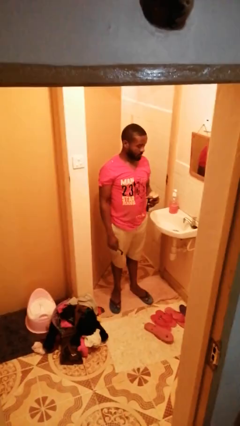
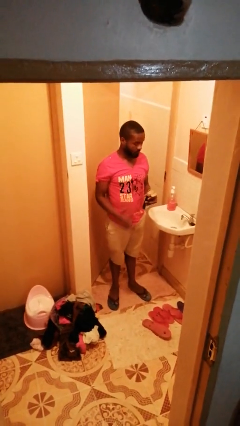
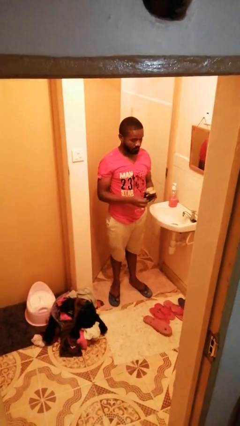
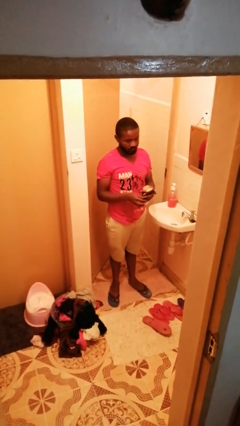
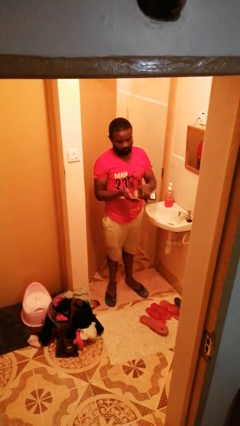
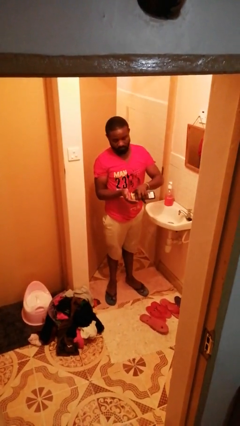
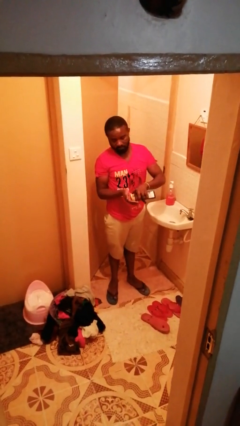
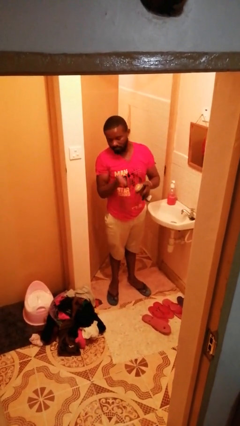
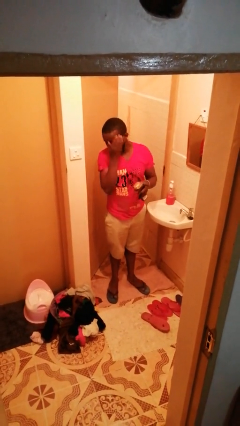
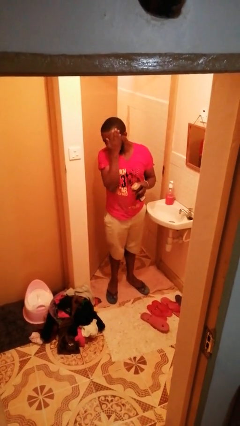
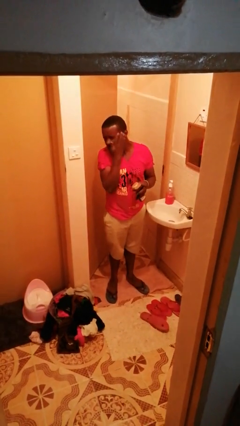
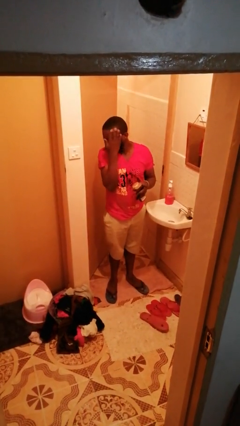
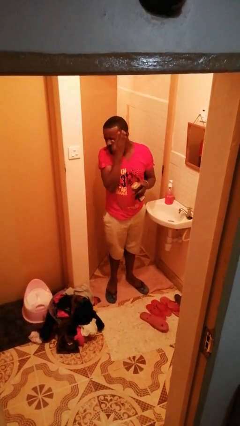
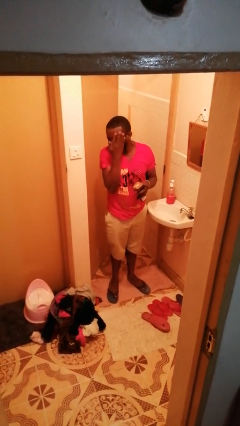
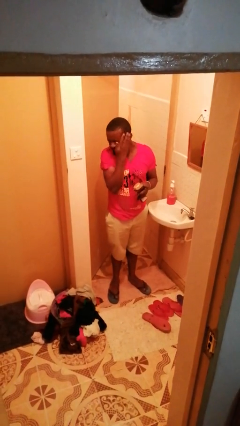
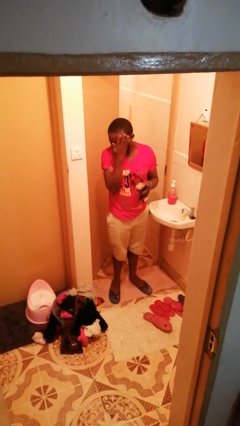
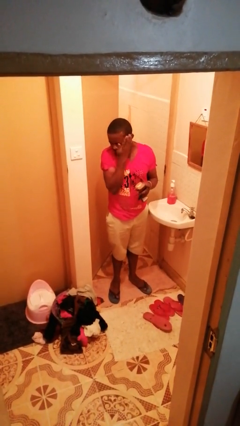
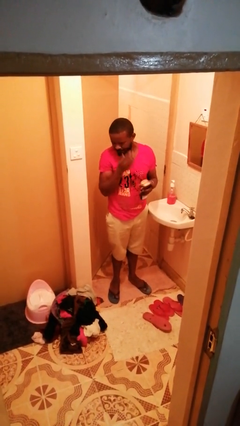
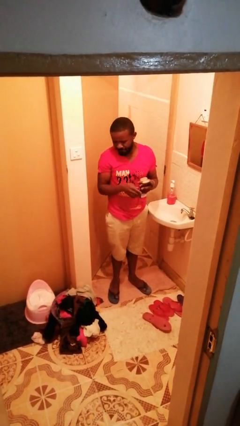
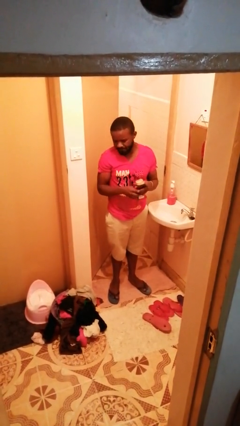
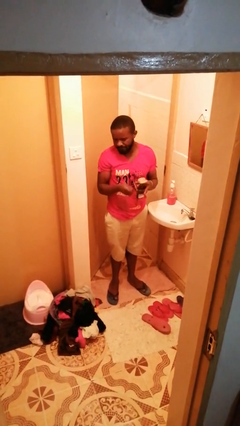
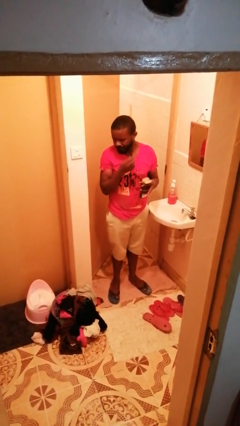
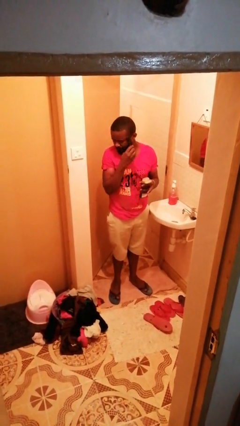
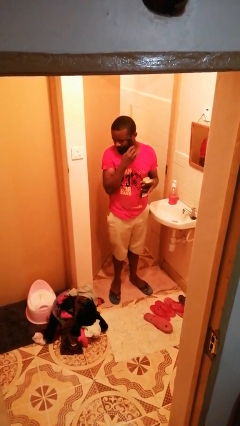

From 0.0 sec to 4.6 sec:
person applies shaving cream

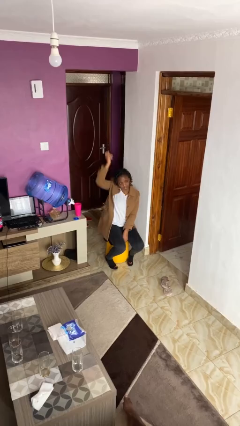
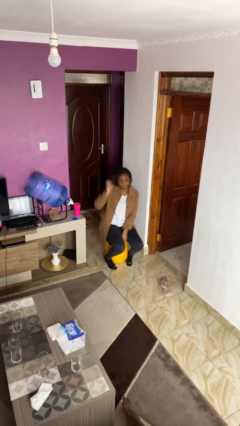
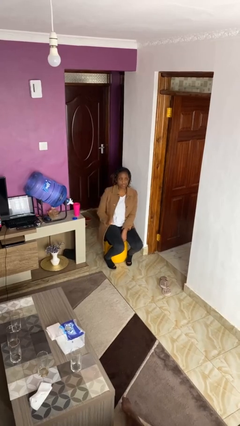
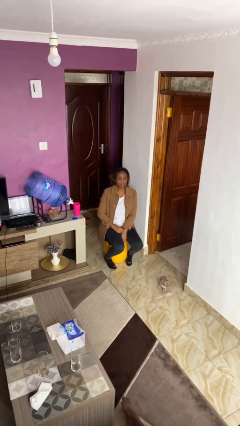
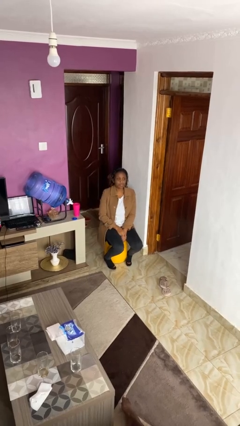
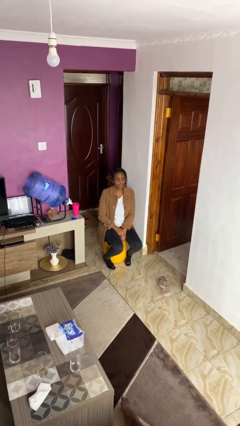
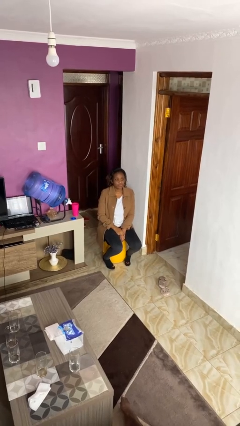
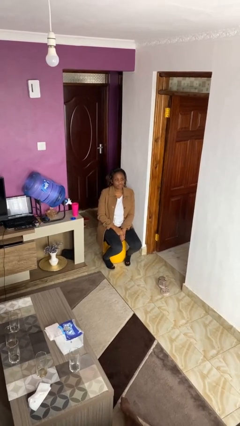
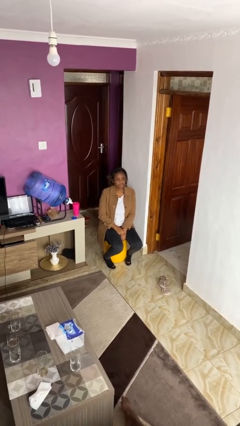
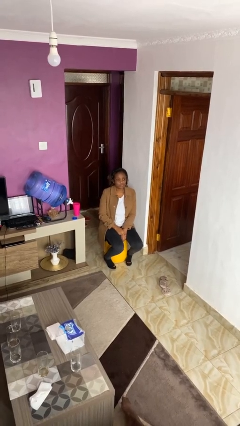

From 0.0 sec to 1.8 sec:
person gestures lower hand

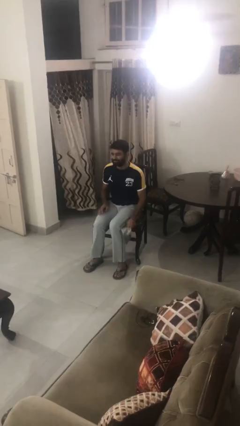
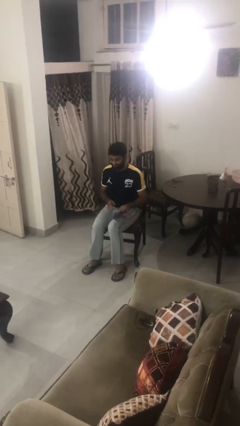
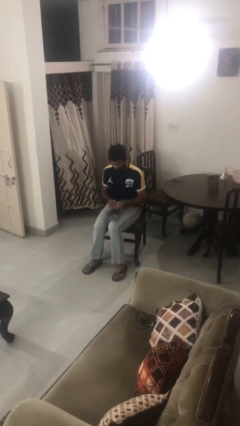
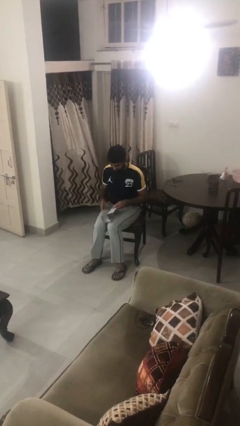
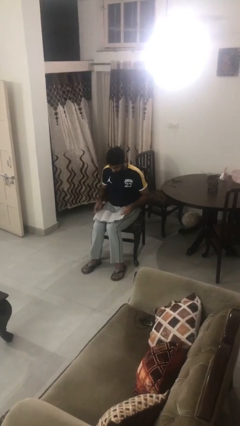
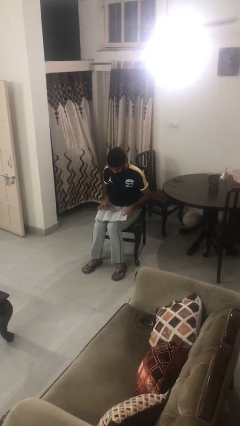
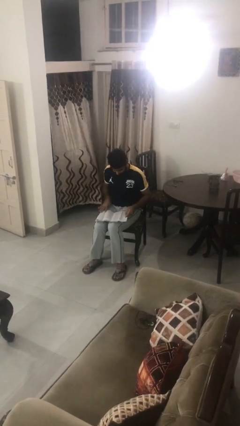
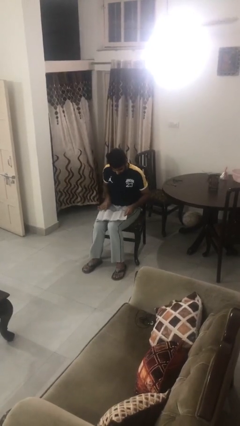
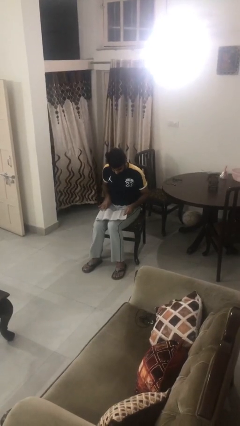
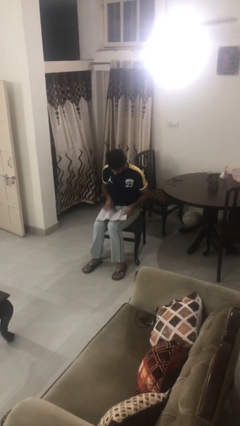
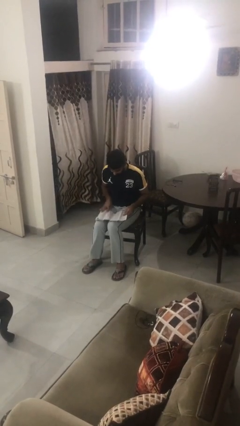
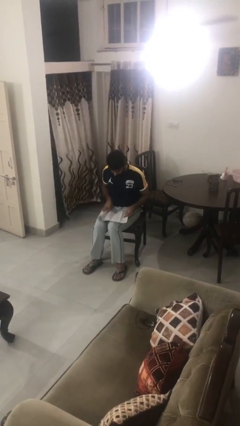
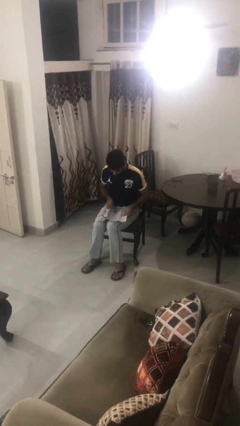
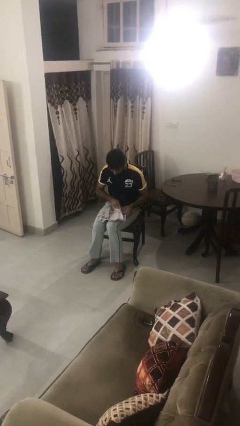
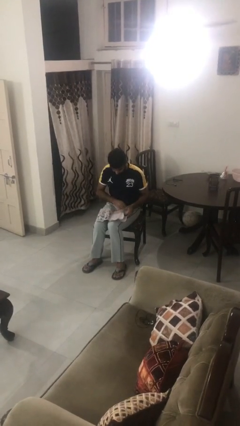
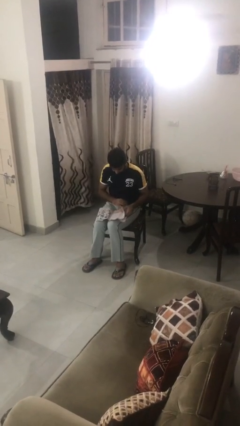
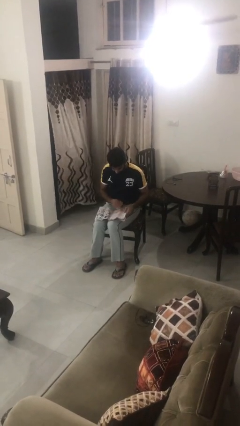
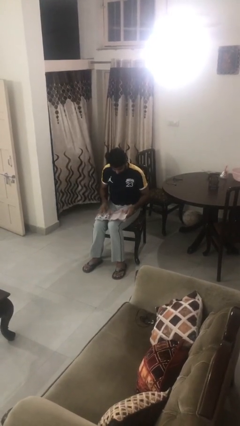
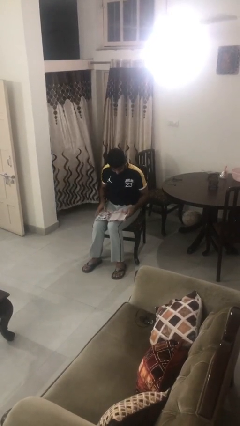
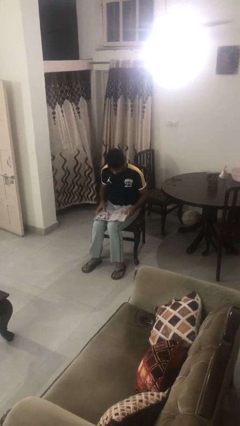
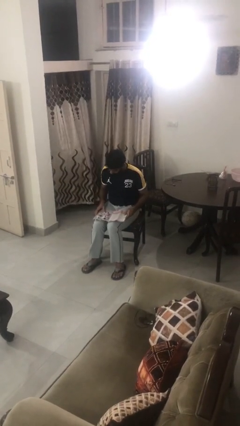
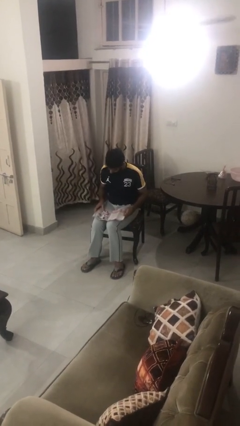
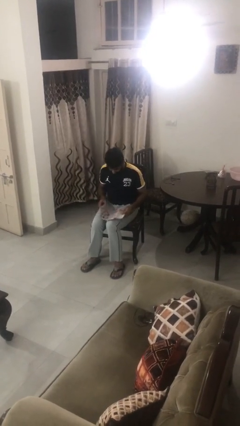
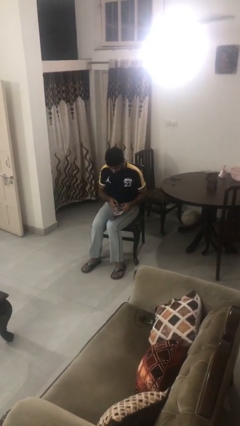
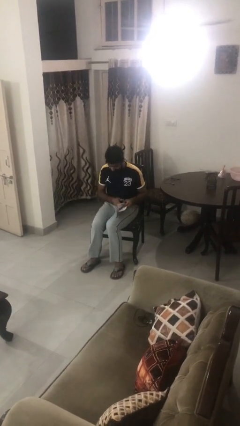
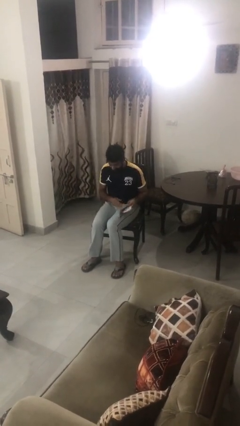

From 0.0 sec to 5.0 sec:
person reads magazine

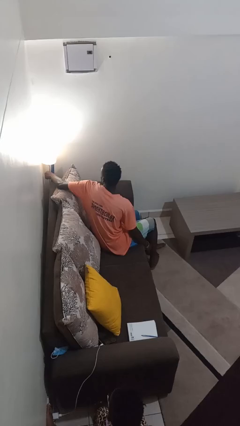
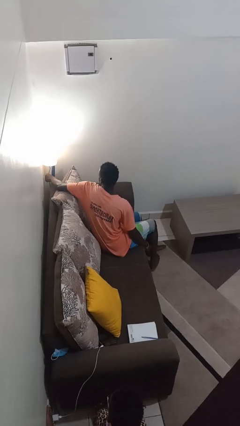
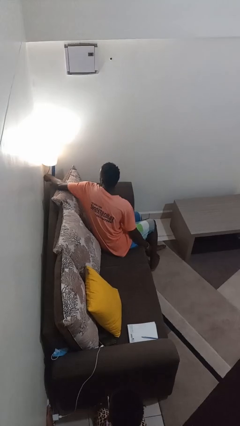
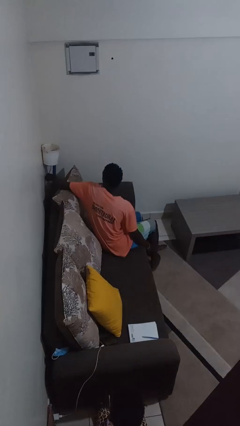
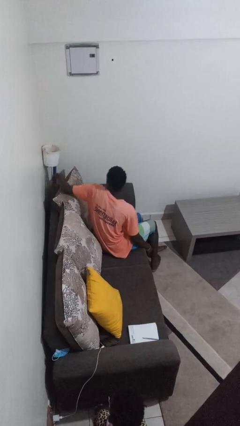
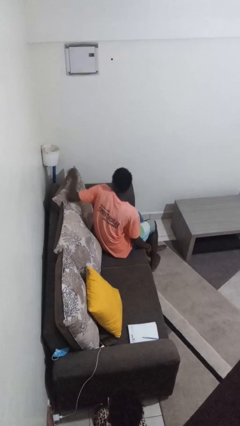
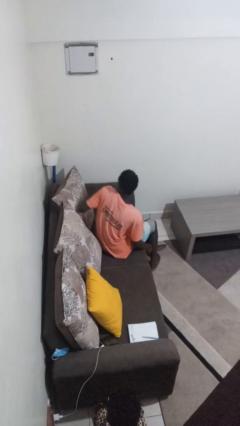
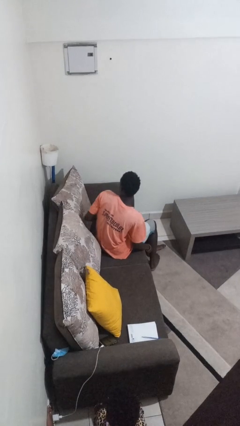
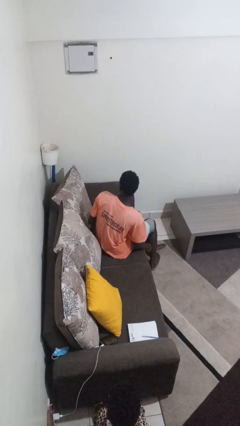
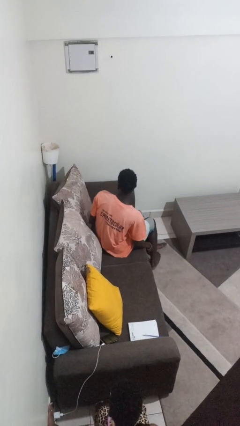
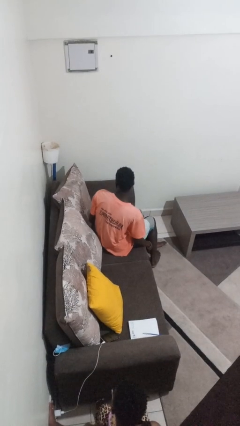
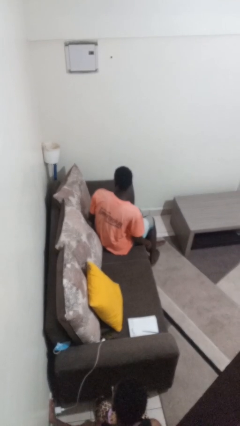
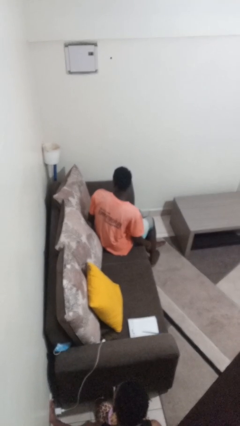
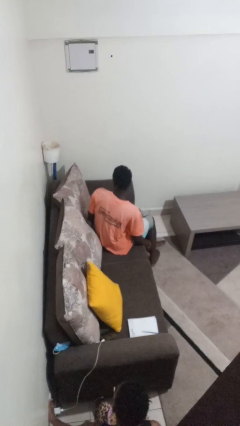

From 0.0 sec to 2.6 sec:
person turns off lamp

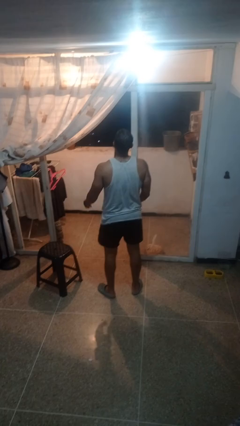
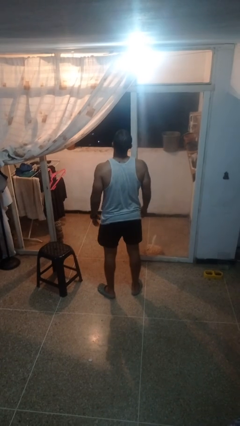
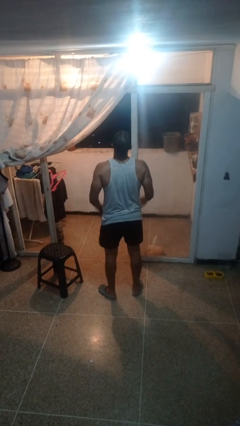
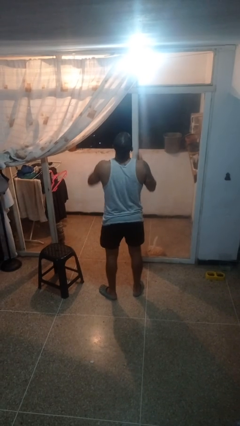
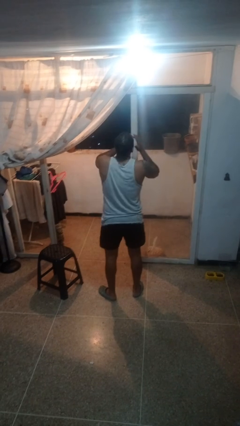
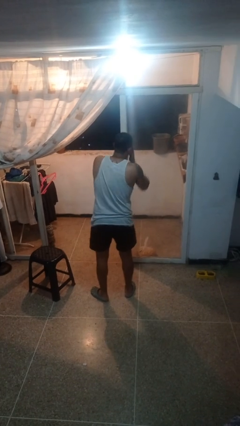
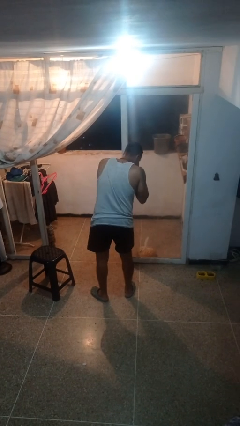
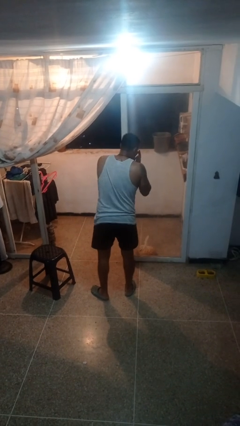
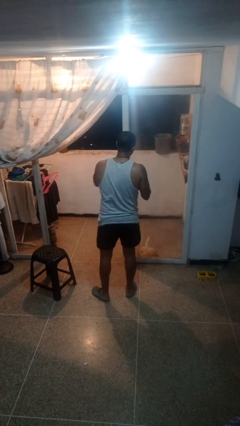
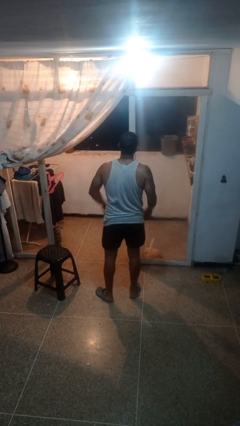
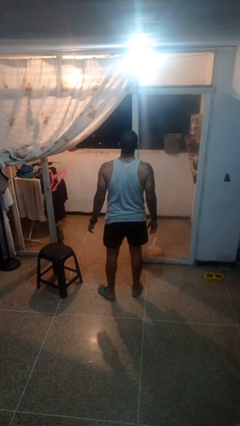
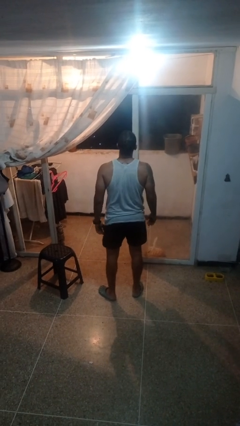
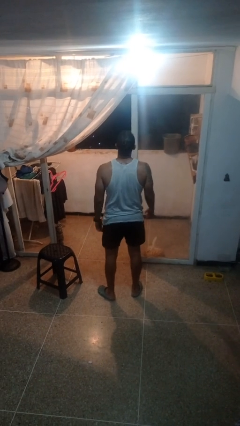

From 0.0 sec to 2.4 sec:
person sneezes into hand

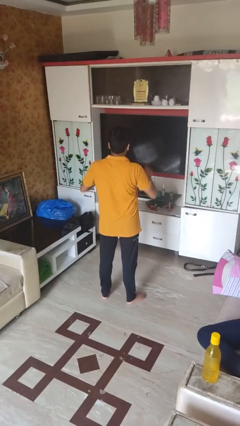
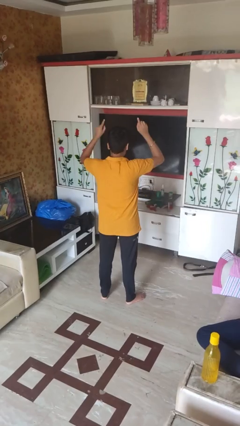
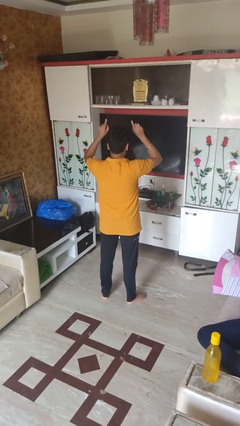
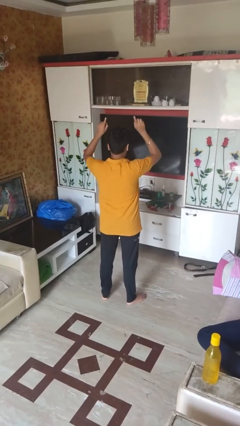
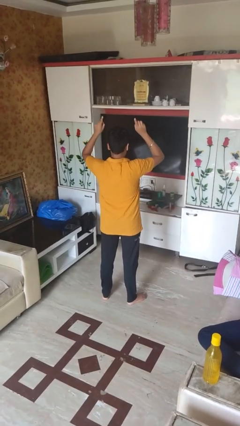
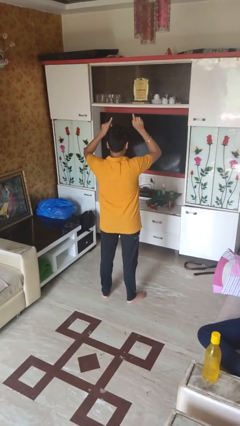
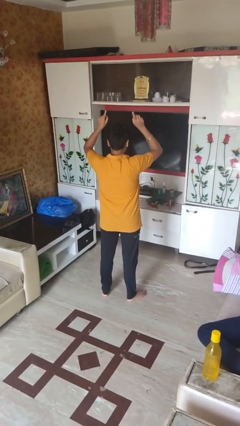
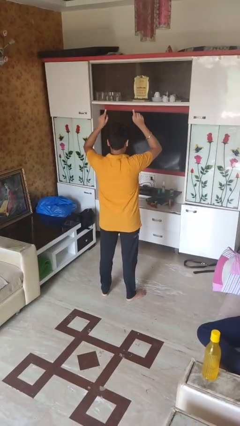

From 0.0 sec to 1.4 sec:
person dances in place
